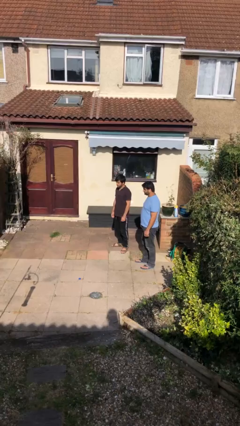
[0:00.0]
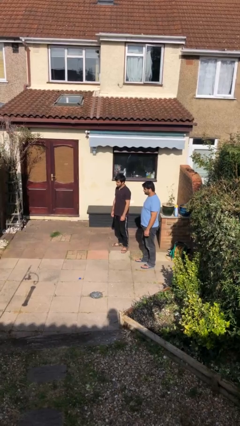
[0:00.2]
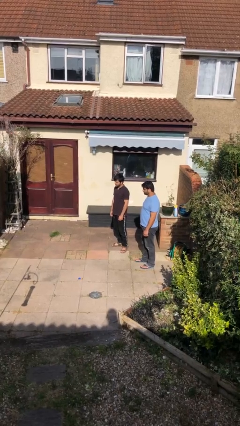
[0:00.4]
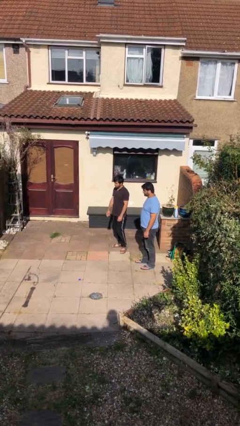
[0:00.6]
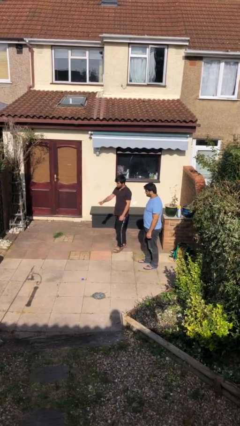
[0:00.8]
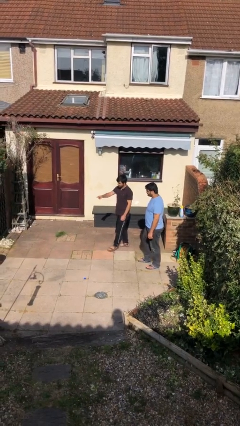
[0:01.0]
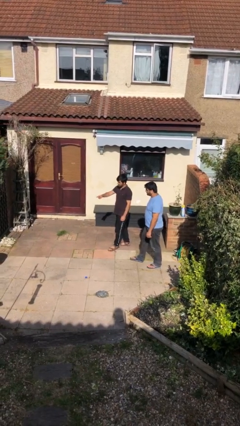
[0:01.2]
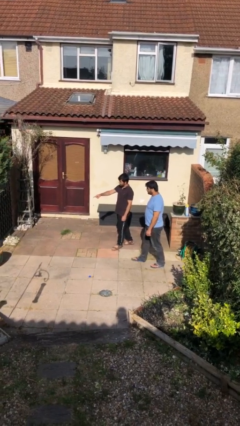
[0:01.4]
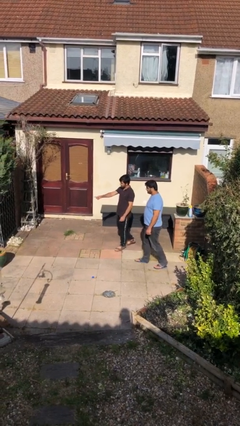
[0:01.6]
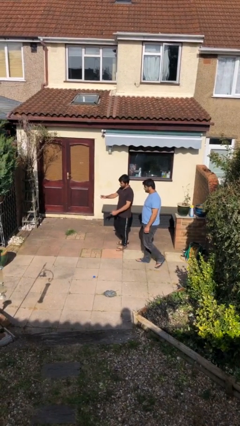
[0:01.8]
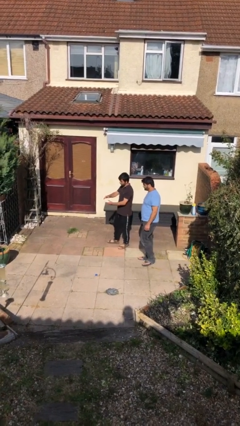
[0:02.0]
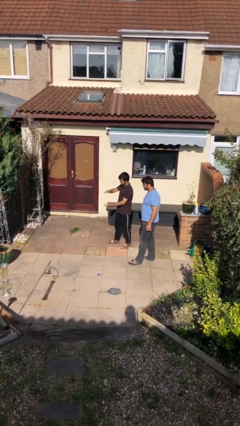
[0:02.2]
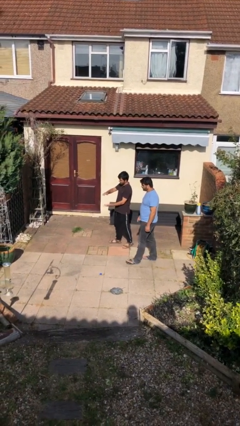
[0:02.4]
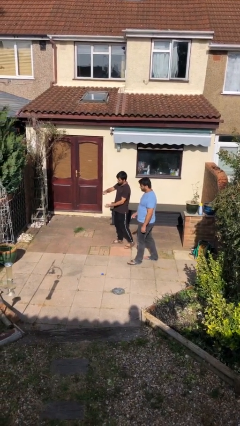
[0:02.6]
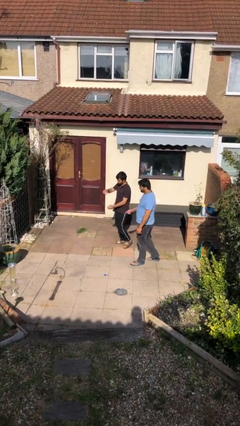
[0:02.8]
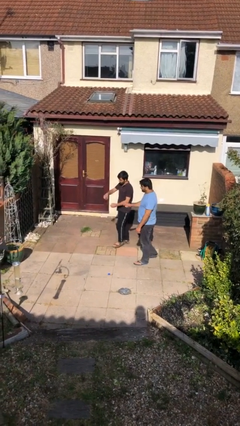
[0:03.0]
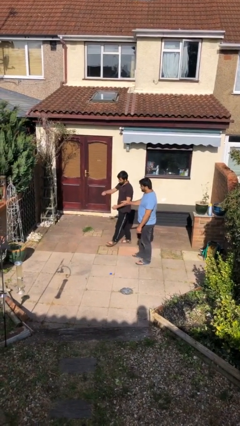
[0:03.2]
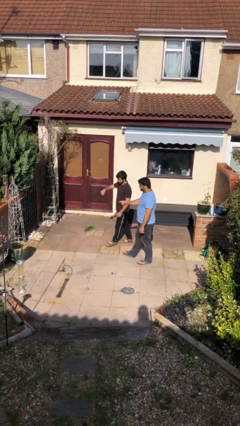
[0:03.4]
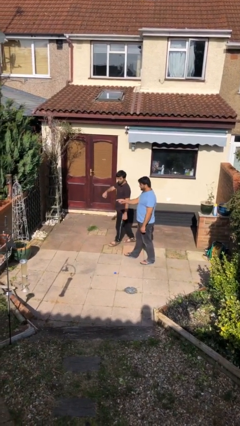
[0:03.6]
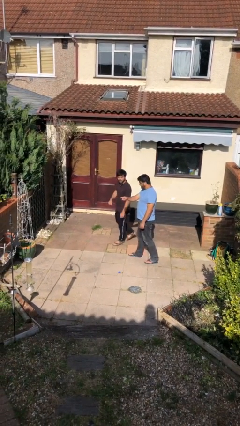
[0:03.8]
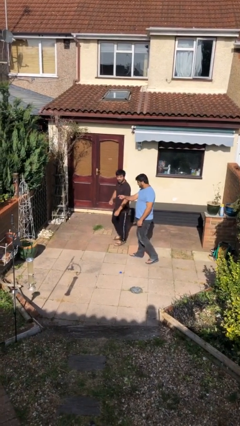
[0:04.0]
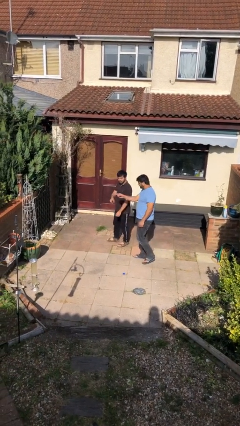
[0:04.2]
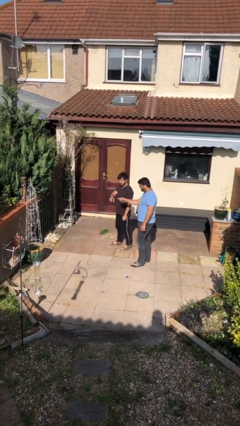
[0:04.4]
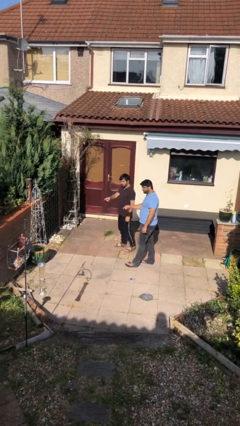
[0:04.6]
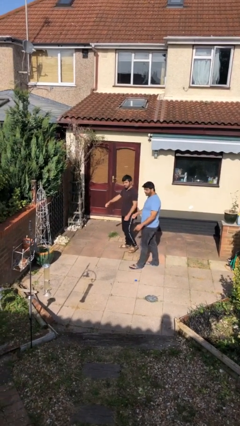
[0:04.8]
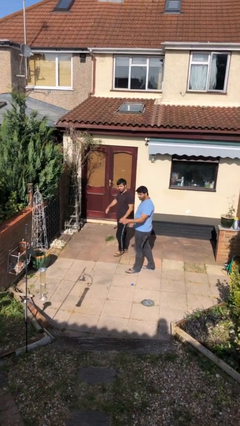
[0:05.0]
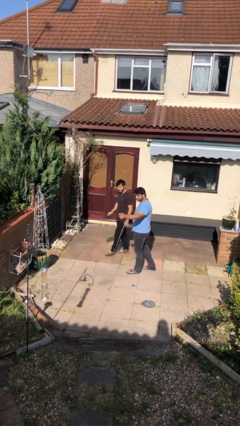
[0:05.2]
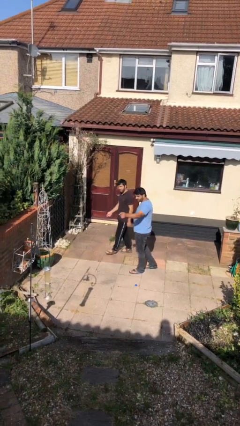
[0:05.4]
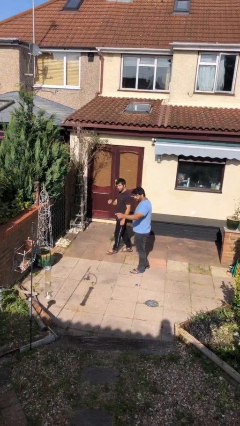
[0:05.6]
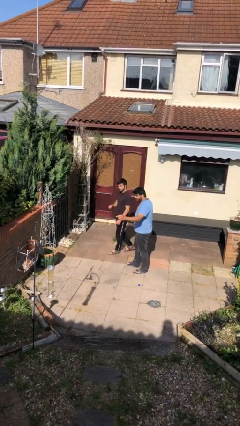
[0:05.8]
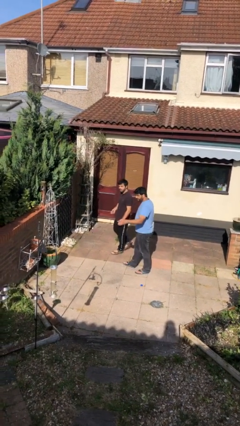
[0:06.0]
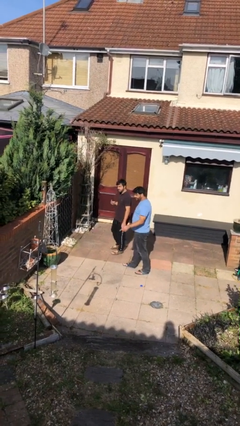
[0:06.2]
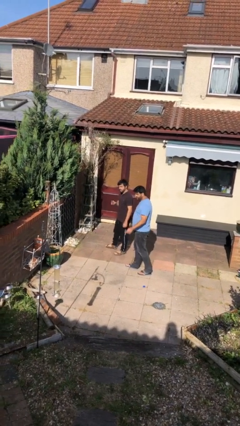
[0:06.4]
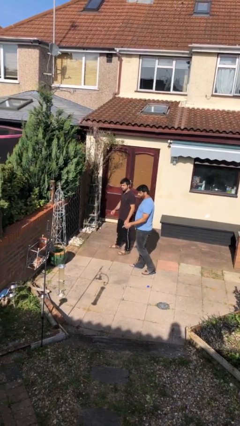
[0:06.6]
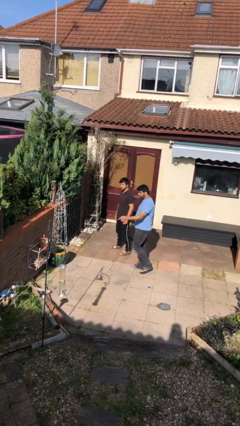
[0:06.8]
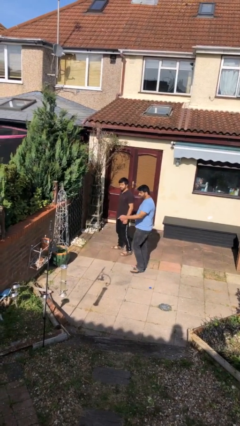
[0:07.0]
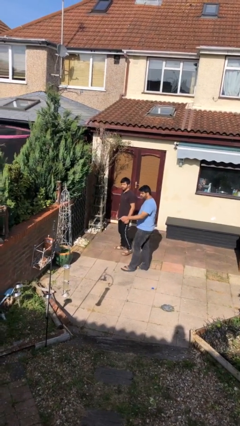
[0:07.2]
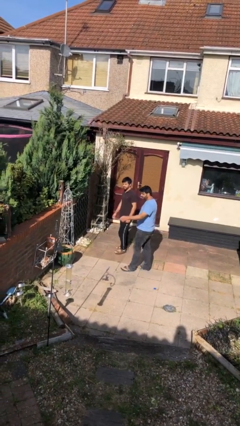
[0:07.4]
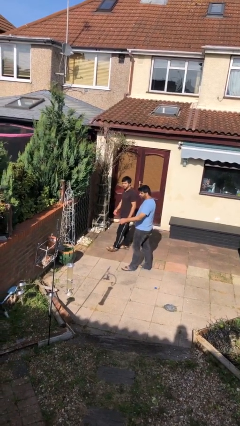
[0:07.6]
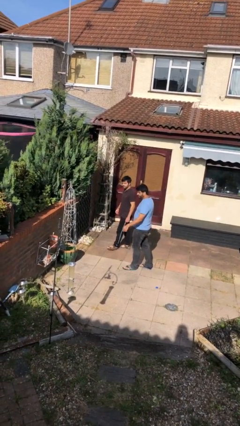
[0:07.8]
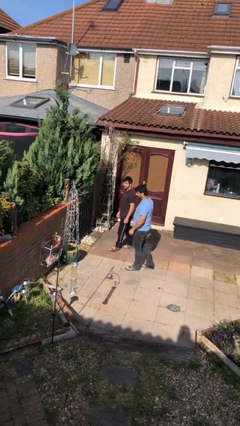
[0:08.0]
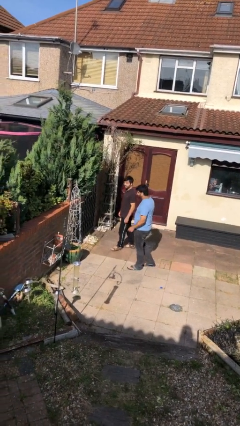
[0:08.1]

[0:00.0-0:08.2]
person talks to person

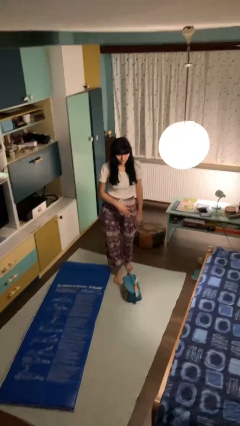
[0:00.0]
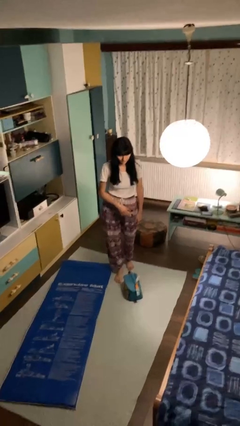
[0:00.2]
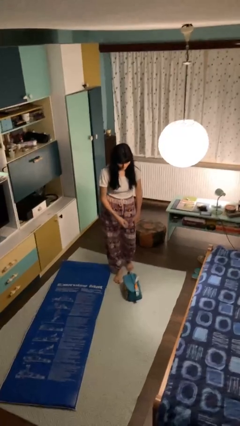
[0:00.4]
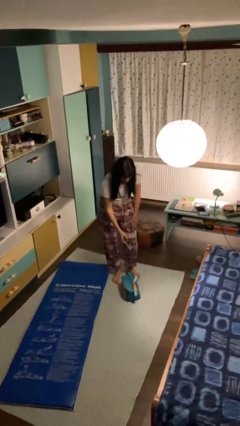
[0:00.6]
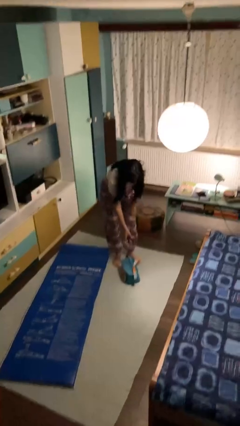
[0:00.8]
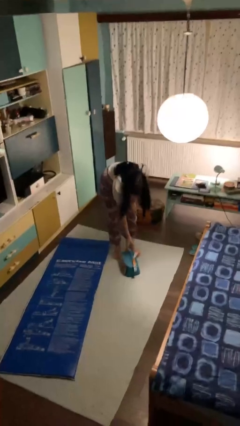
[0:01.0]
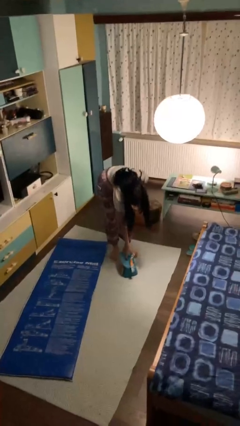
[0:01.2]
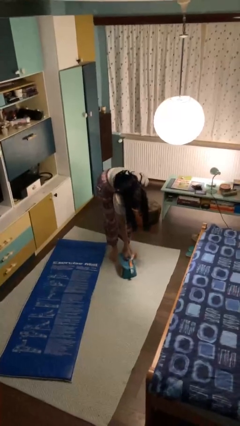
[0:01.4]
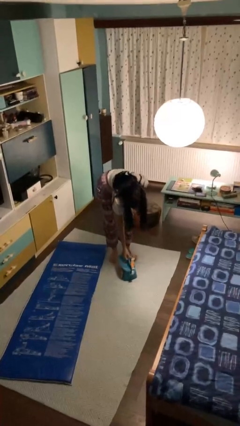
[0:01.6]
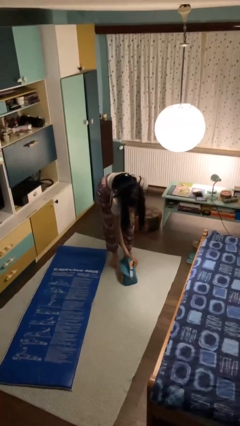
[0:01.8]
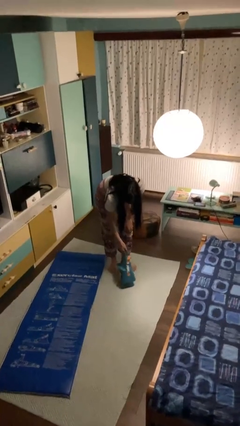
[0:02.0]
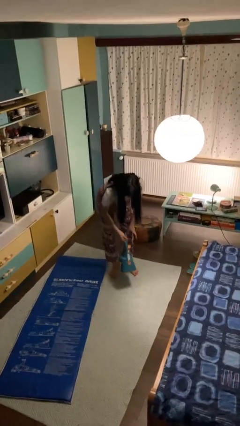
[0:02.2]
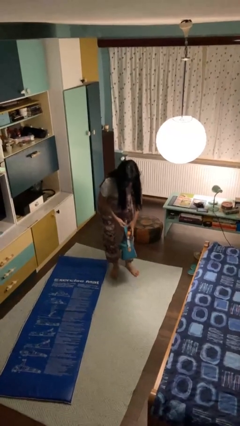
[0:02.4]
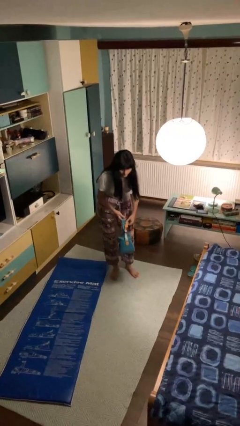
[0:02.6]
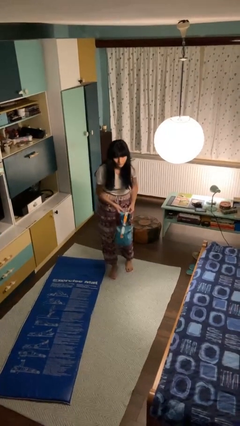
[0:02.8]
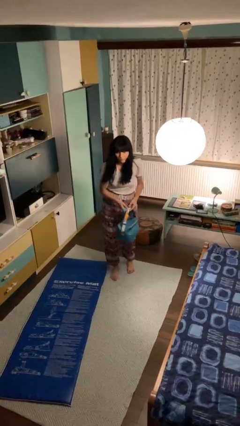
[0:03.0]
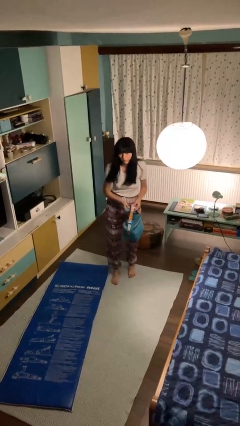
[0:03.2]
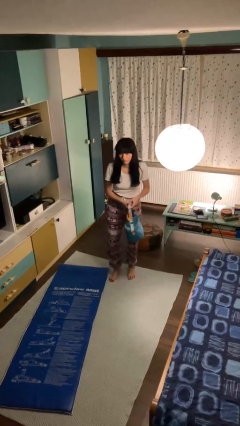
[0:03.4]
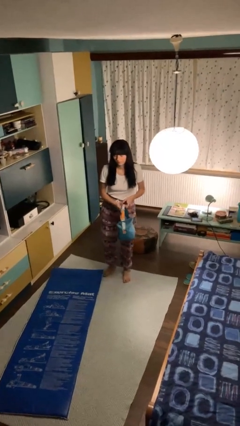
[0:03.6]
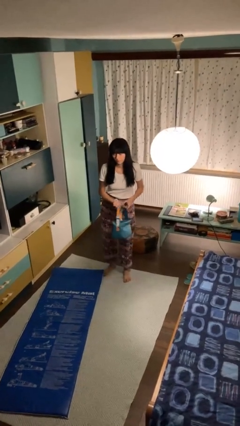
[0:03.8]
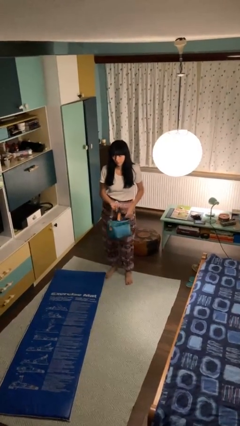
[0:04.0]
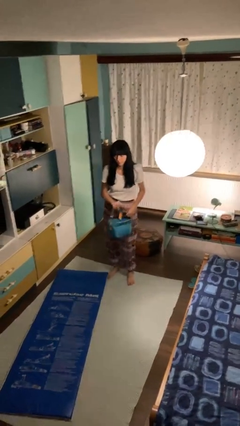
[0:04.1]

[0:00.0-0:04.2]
person picks up object from floor

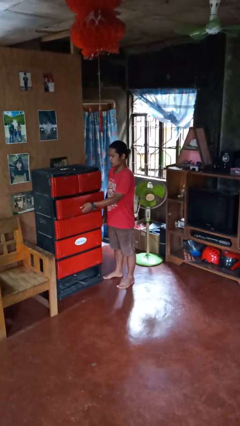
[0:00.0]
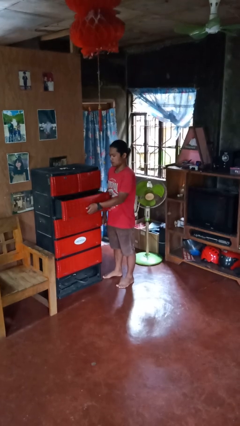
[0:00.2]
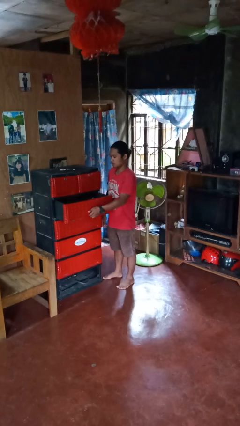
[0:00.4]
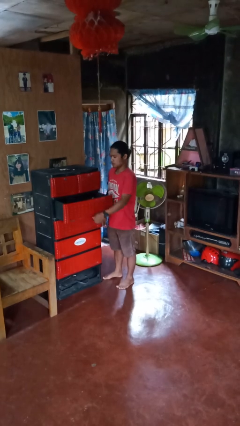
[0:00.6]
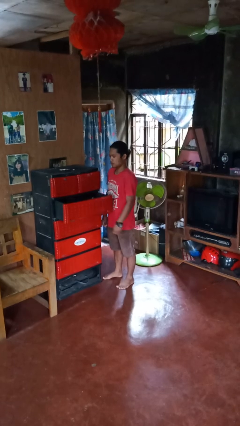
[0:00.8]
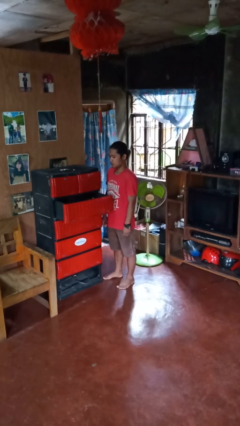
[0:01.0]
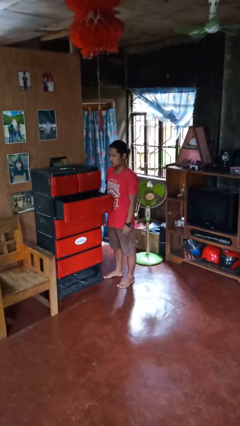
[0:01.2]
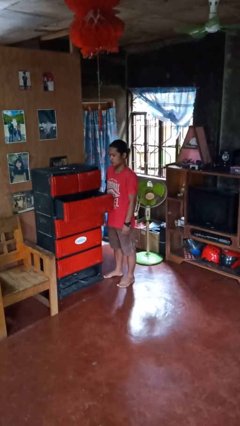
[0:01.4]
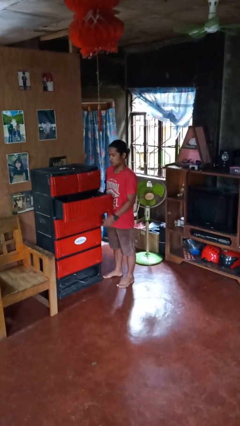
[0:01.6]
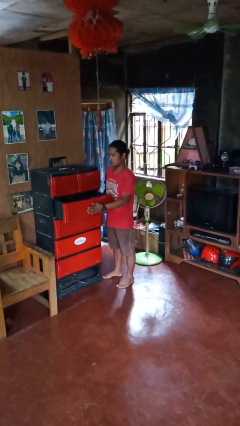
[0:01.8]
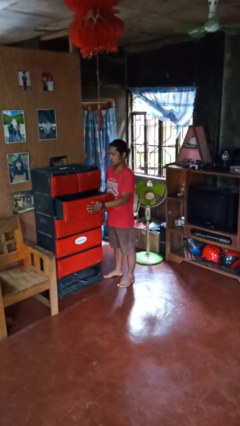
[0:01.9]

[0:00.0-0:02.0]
person opens dresser drawer

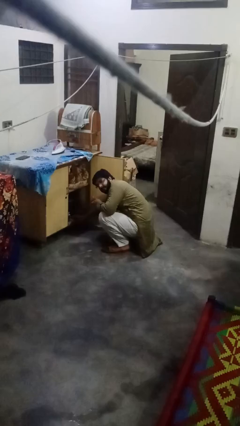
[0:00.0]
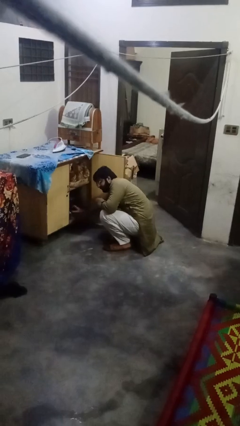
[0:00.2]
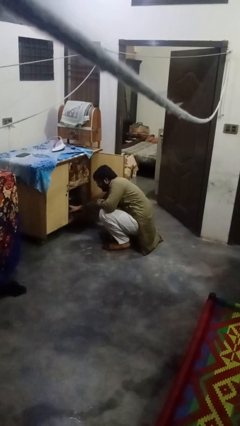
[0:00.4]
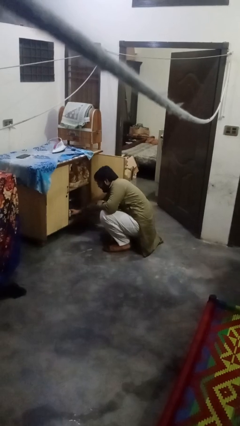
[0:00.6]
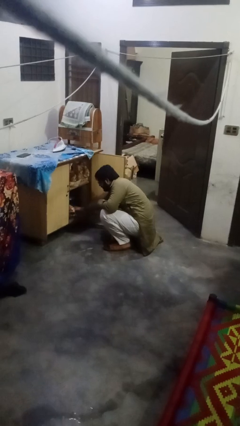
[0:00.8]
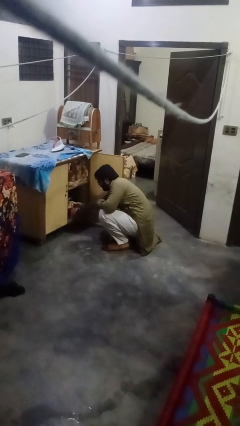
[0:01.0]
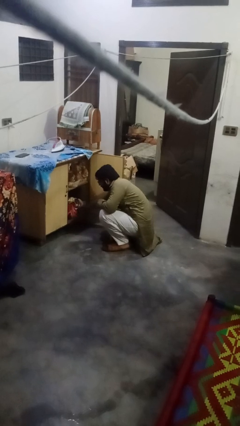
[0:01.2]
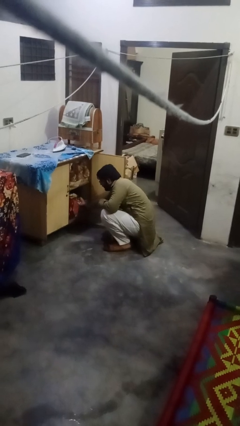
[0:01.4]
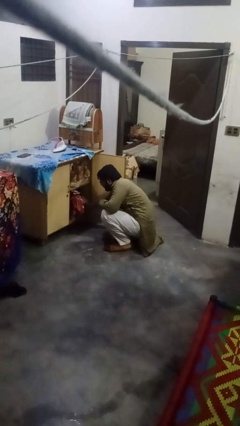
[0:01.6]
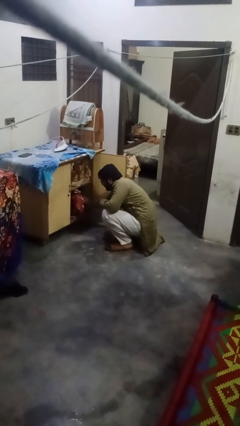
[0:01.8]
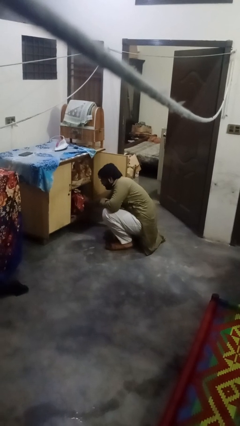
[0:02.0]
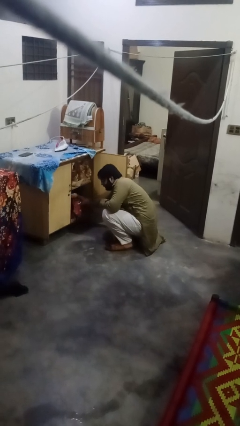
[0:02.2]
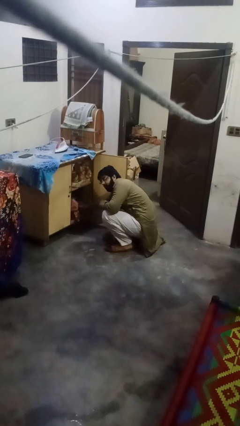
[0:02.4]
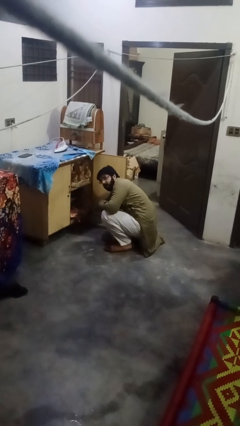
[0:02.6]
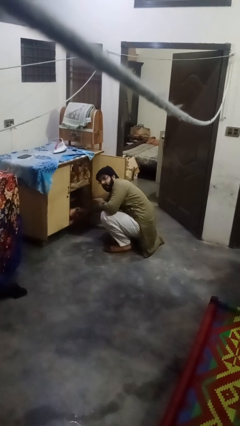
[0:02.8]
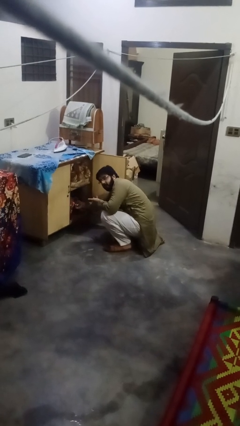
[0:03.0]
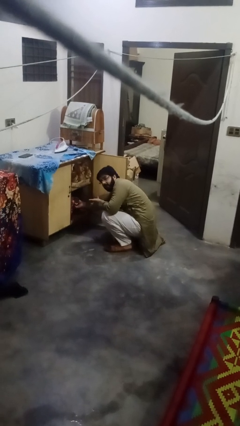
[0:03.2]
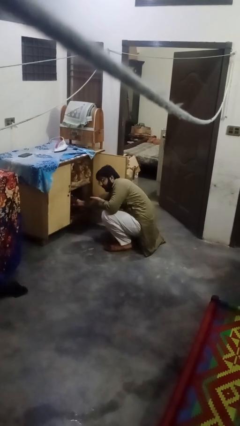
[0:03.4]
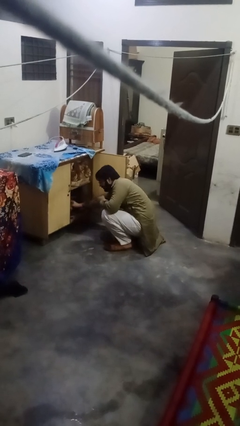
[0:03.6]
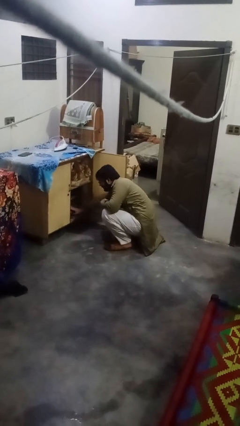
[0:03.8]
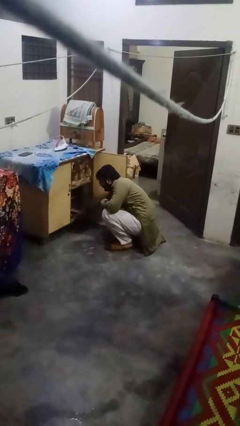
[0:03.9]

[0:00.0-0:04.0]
person searches in cabinet
